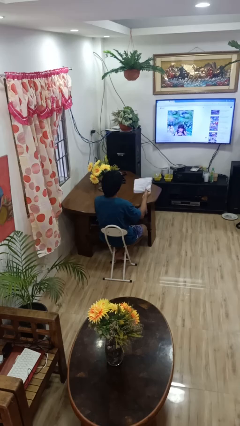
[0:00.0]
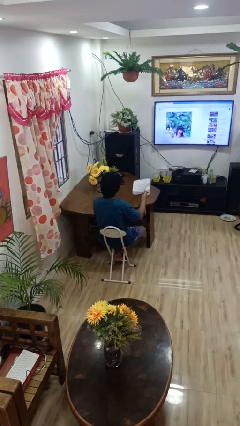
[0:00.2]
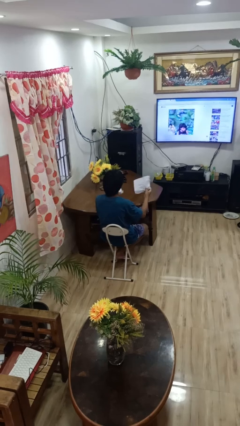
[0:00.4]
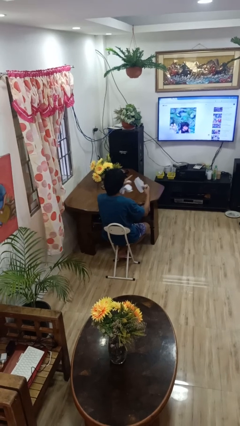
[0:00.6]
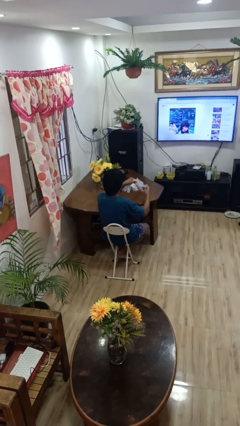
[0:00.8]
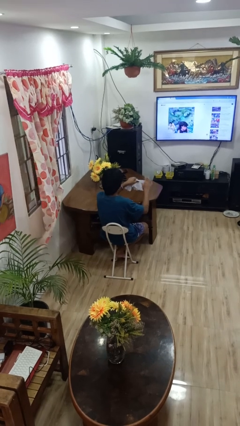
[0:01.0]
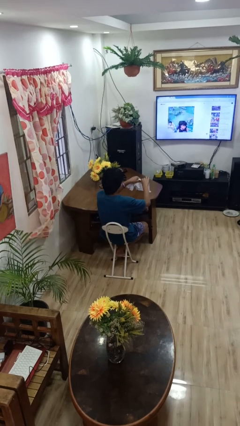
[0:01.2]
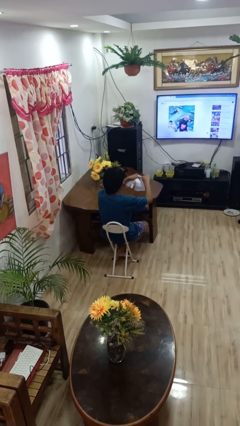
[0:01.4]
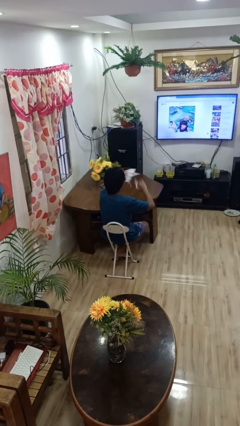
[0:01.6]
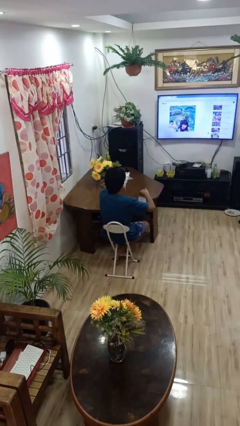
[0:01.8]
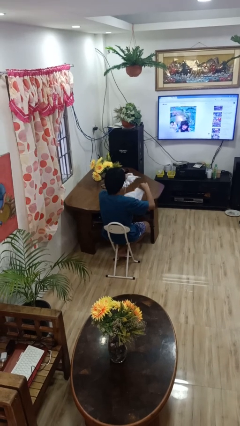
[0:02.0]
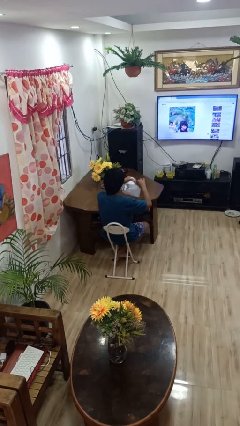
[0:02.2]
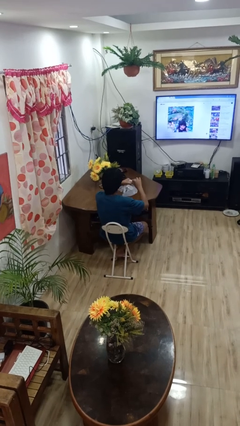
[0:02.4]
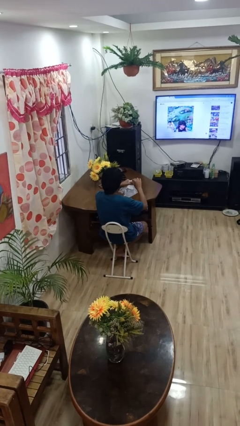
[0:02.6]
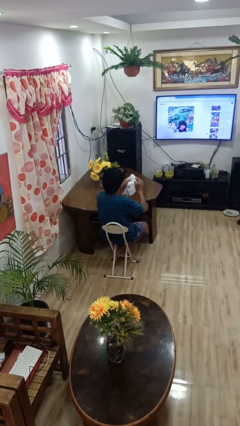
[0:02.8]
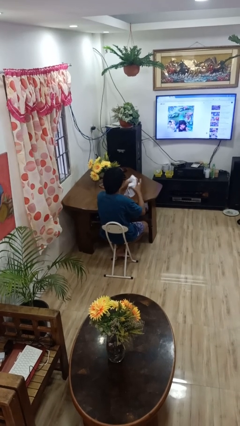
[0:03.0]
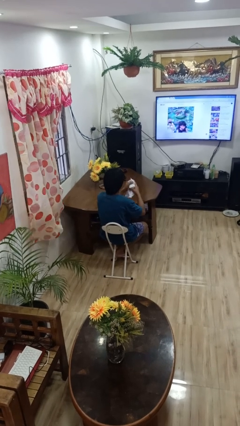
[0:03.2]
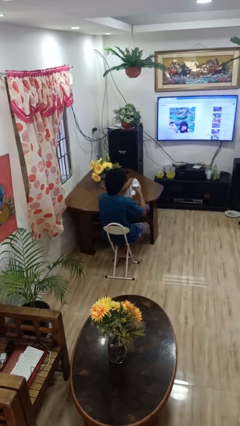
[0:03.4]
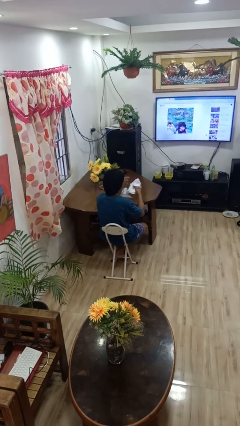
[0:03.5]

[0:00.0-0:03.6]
person tears paper

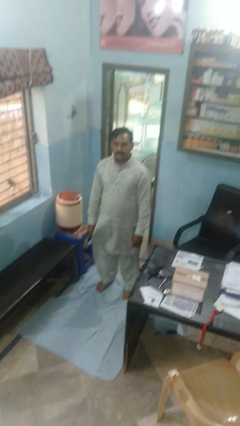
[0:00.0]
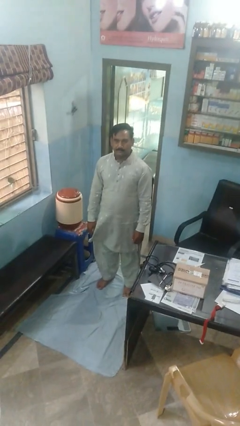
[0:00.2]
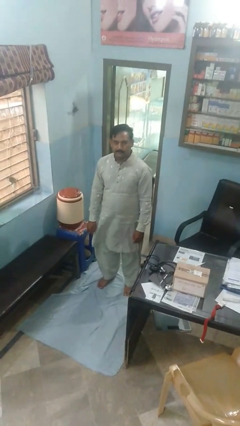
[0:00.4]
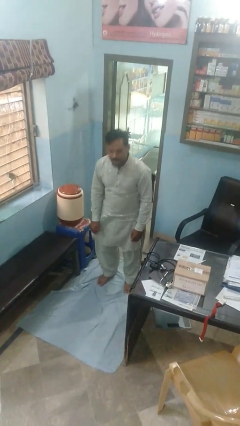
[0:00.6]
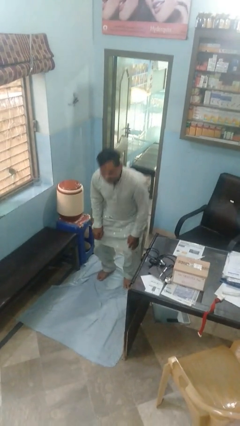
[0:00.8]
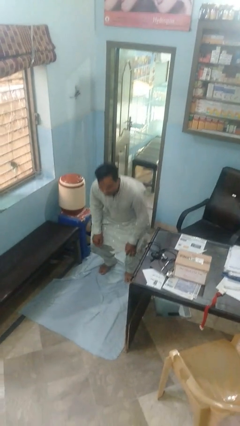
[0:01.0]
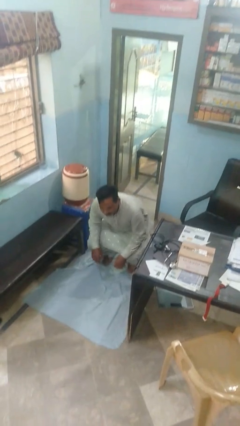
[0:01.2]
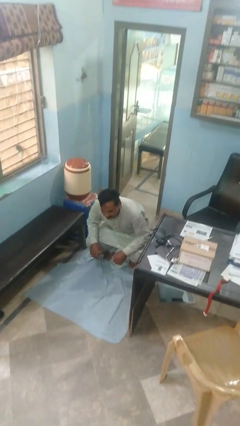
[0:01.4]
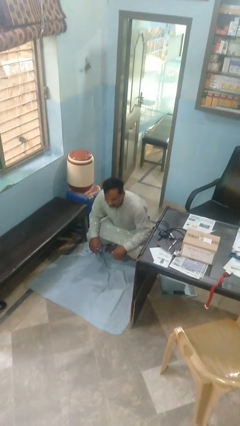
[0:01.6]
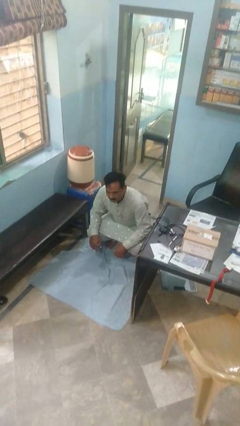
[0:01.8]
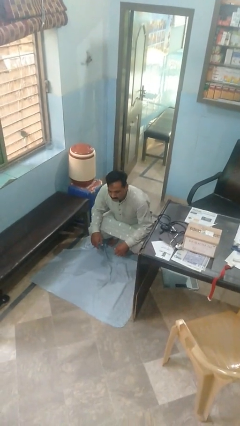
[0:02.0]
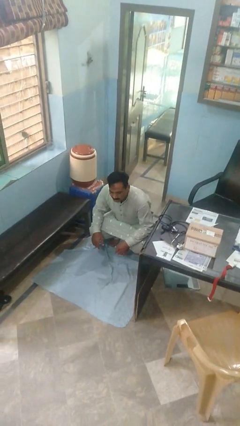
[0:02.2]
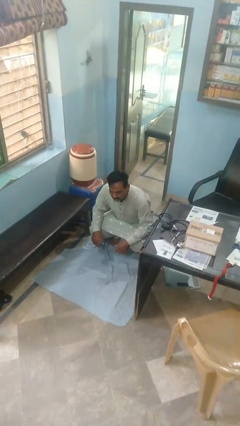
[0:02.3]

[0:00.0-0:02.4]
person squats

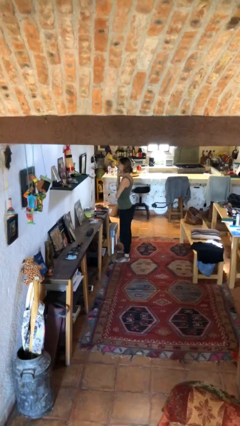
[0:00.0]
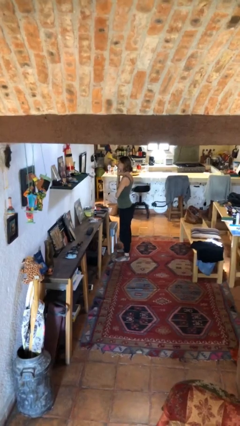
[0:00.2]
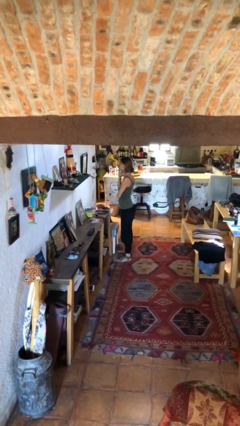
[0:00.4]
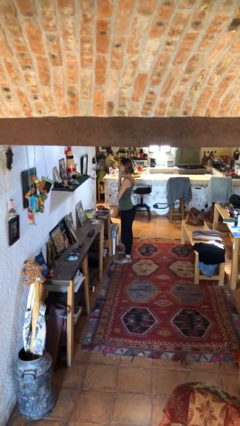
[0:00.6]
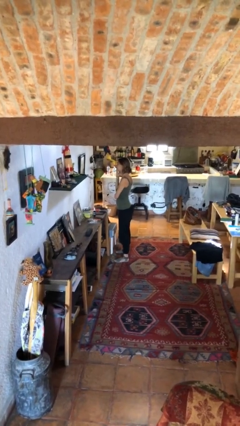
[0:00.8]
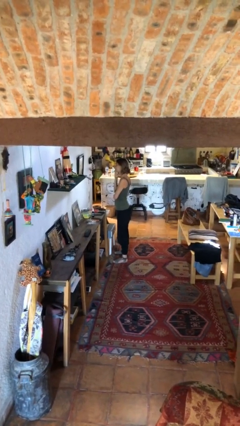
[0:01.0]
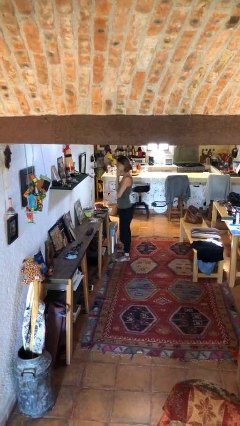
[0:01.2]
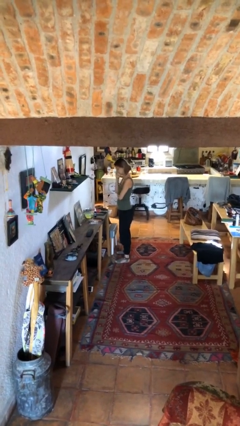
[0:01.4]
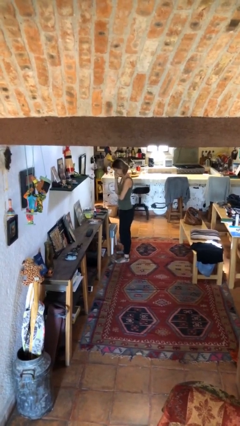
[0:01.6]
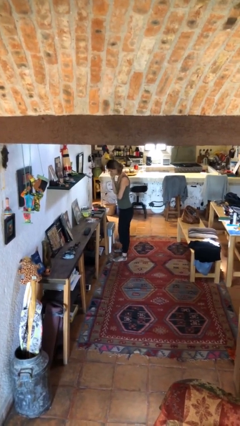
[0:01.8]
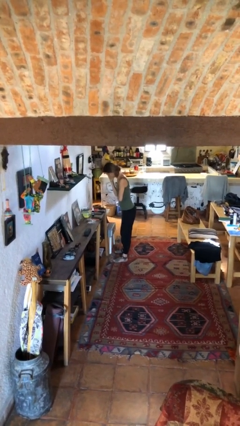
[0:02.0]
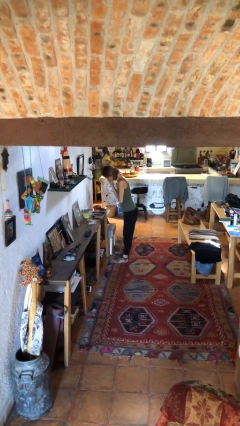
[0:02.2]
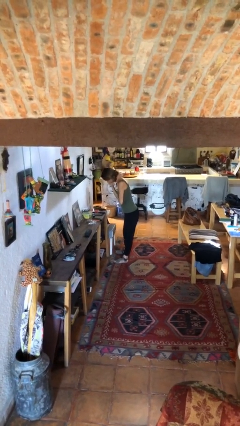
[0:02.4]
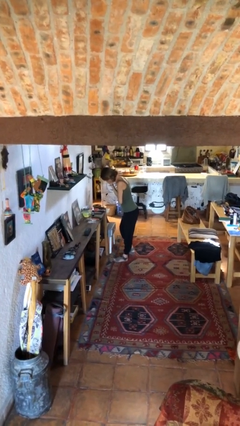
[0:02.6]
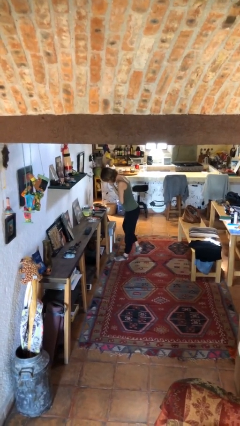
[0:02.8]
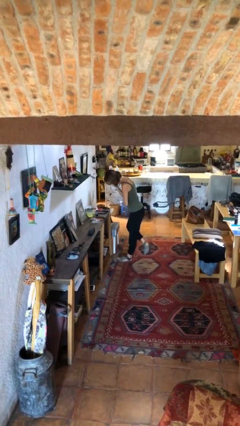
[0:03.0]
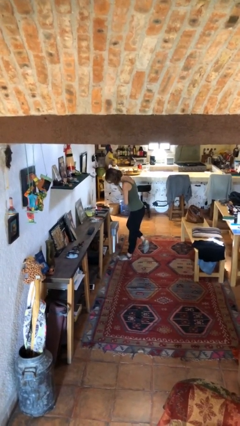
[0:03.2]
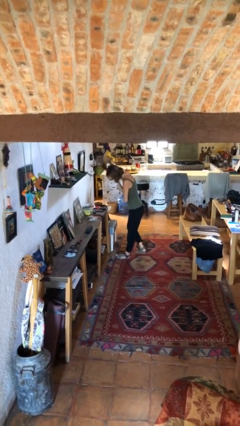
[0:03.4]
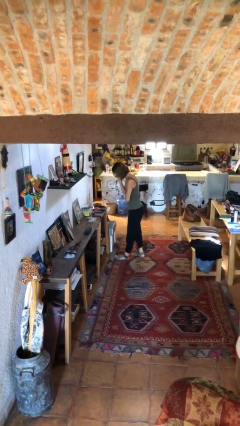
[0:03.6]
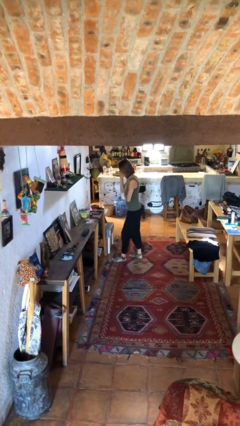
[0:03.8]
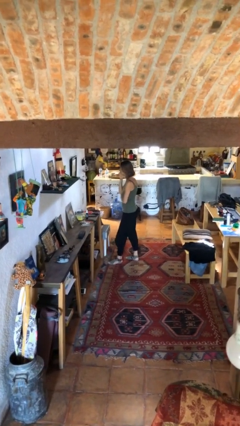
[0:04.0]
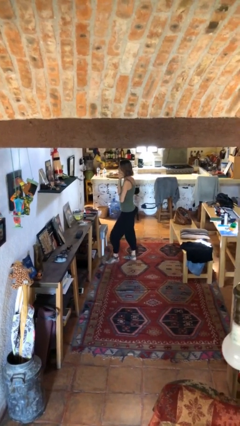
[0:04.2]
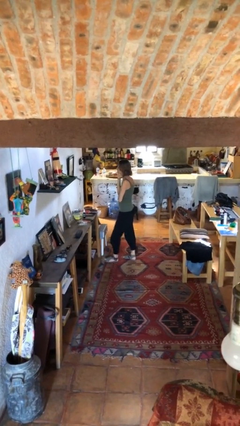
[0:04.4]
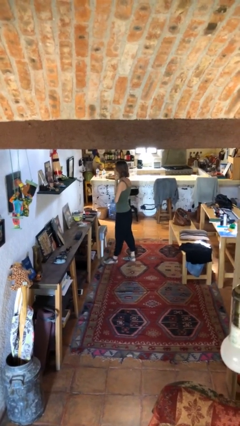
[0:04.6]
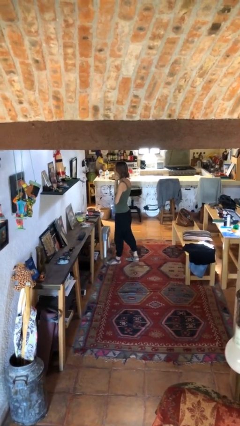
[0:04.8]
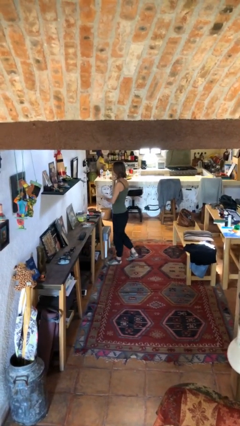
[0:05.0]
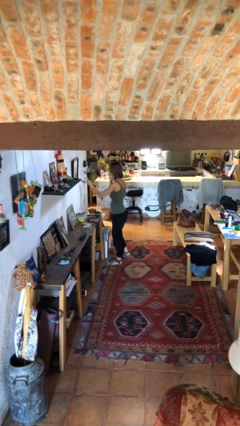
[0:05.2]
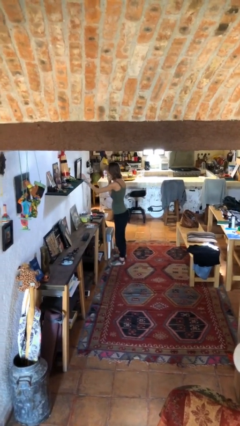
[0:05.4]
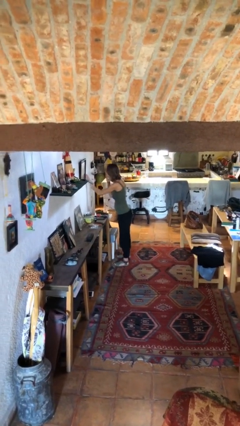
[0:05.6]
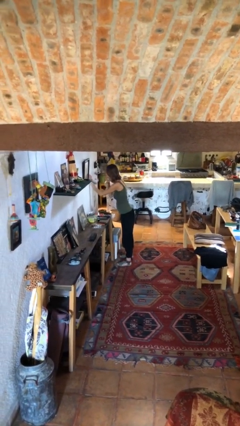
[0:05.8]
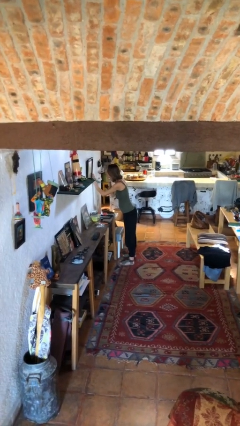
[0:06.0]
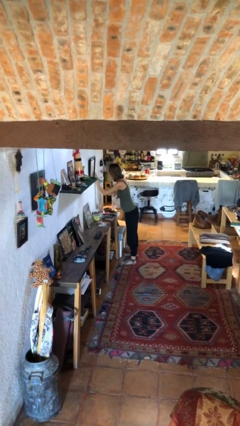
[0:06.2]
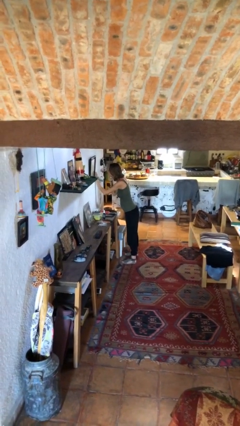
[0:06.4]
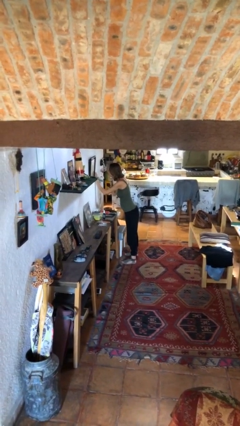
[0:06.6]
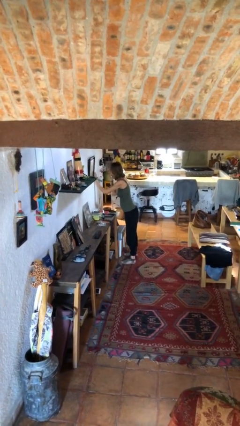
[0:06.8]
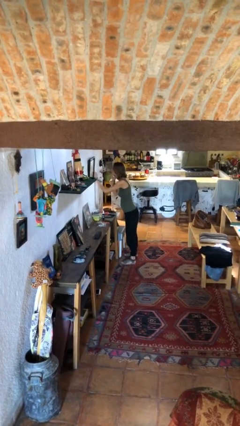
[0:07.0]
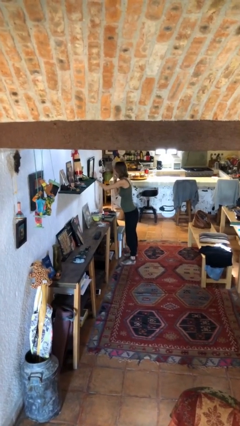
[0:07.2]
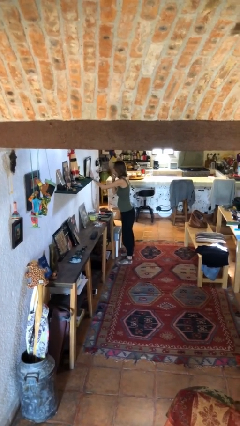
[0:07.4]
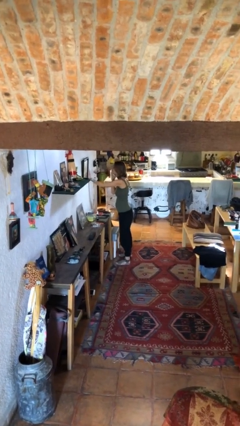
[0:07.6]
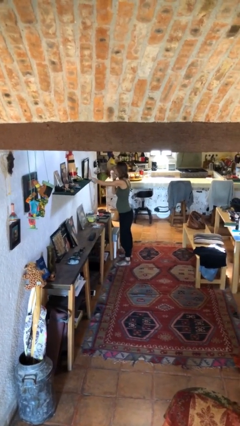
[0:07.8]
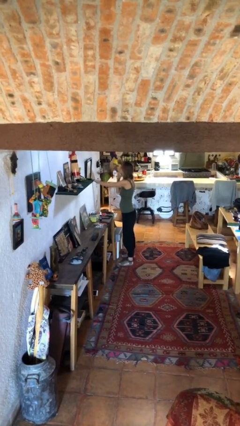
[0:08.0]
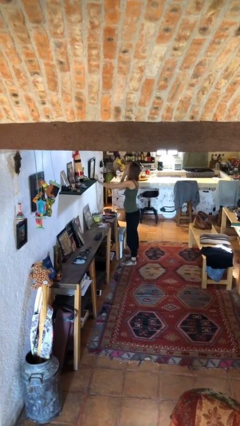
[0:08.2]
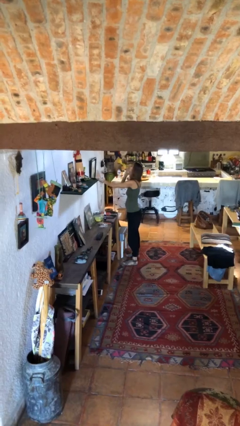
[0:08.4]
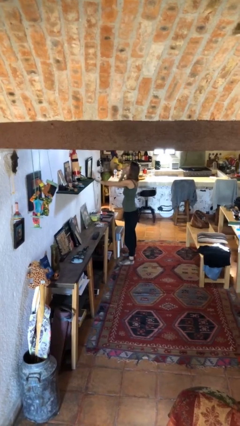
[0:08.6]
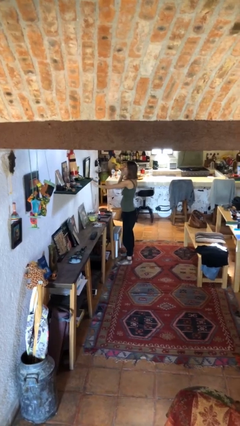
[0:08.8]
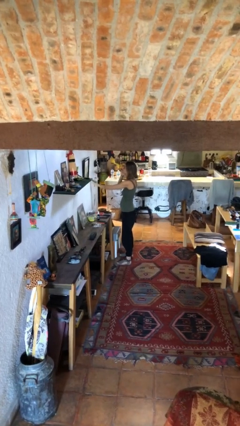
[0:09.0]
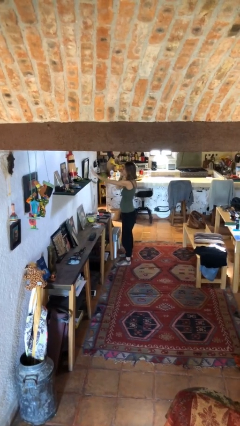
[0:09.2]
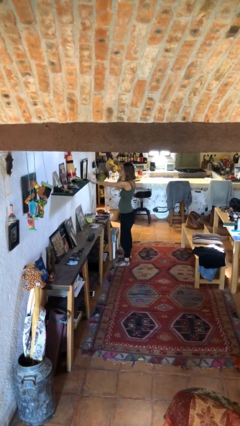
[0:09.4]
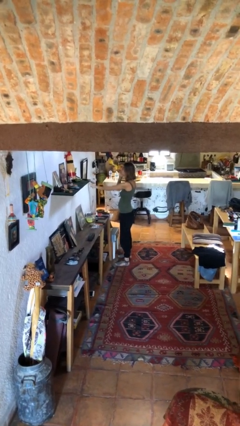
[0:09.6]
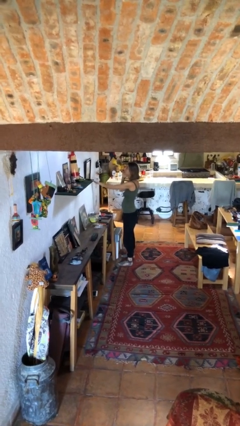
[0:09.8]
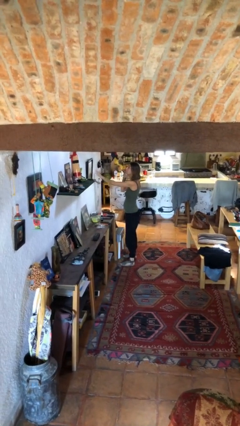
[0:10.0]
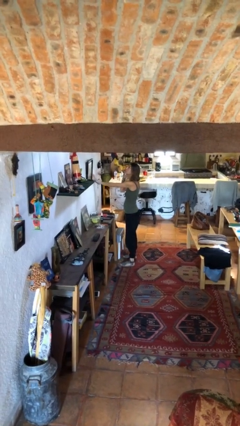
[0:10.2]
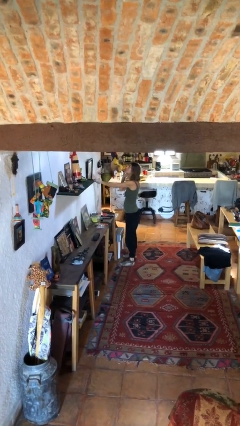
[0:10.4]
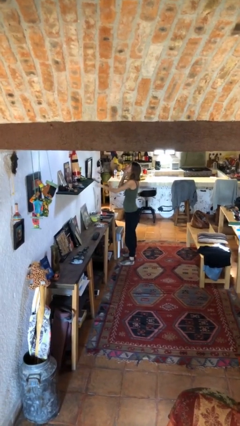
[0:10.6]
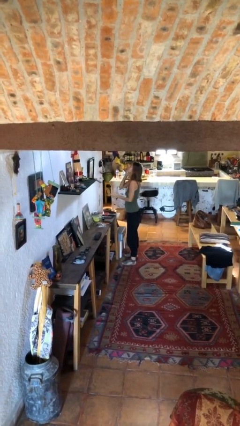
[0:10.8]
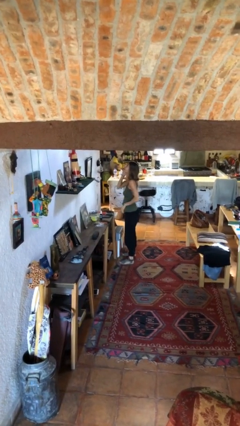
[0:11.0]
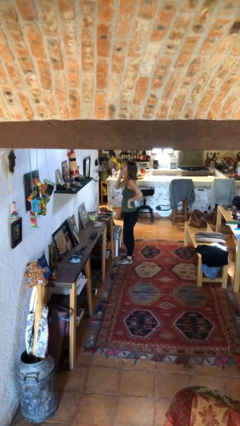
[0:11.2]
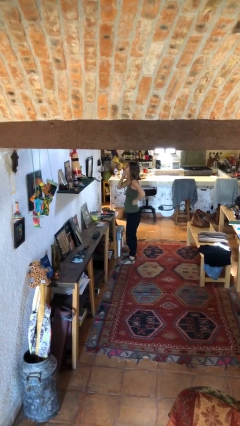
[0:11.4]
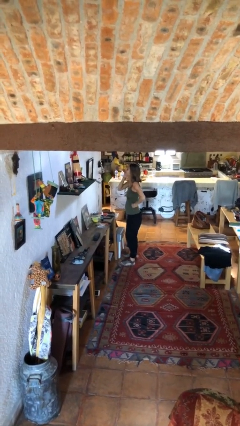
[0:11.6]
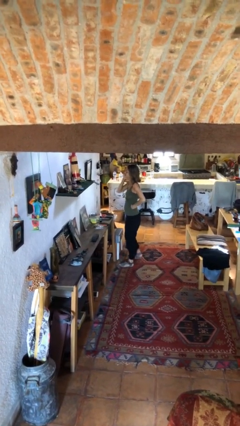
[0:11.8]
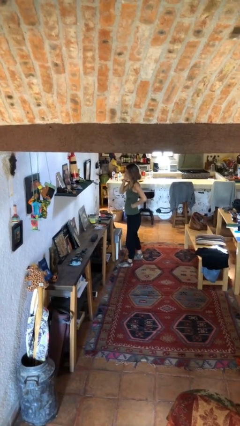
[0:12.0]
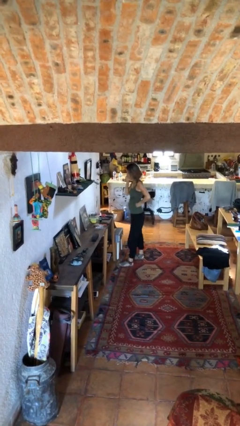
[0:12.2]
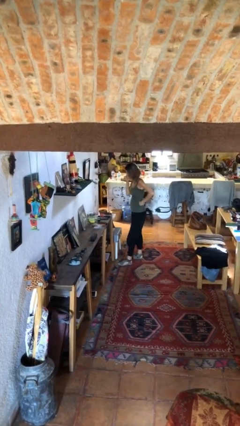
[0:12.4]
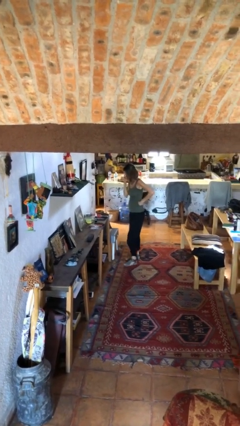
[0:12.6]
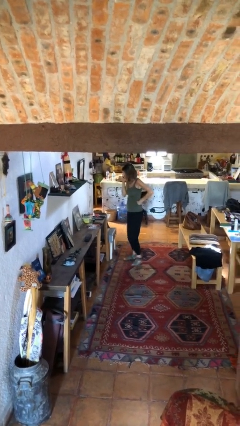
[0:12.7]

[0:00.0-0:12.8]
person talks on phone
